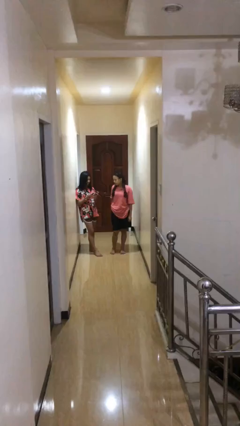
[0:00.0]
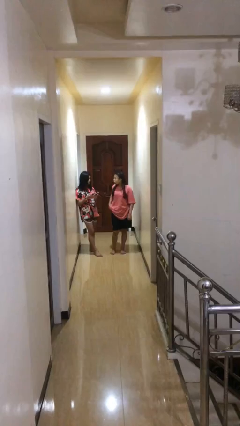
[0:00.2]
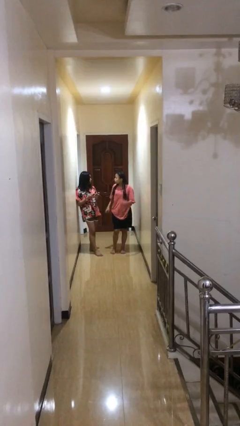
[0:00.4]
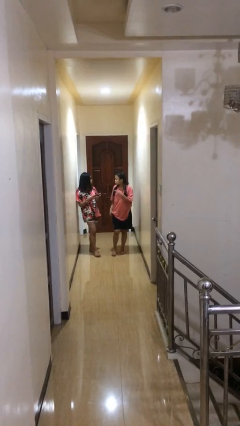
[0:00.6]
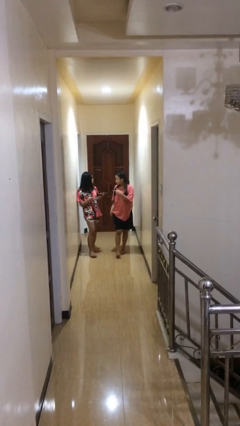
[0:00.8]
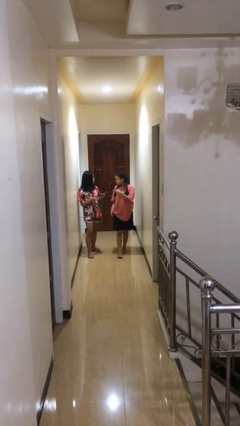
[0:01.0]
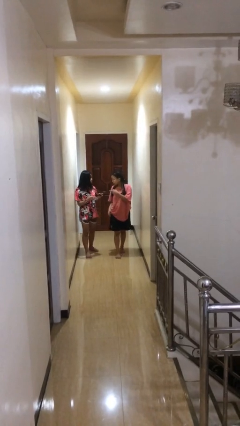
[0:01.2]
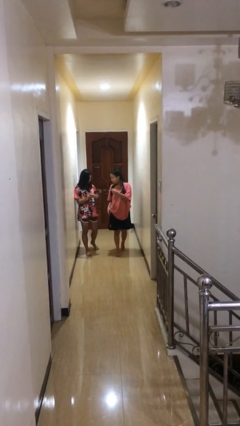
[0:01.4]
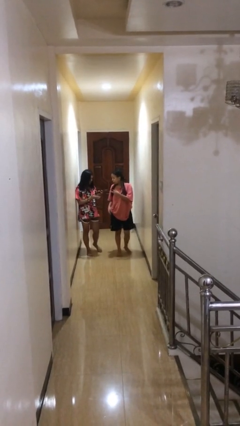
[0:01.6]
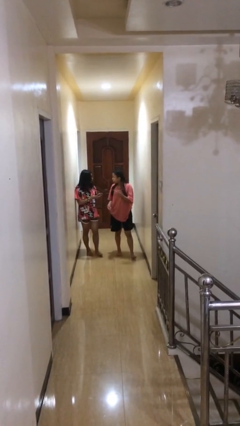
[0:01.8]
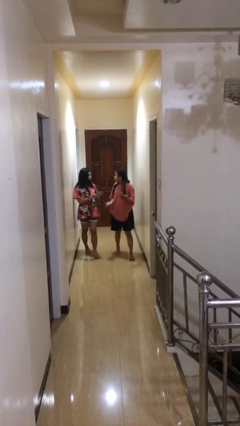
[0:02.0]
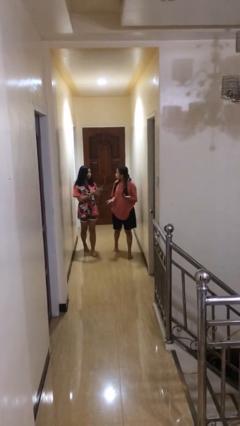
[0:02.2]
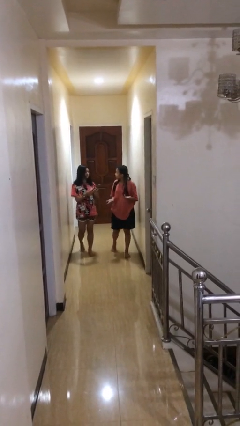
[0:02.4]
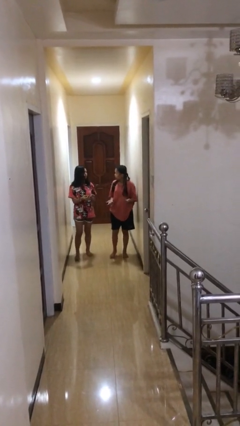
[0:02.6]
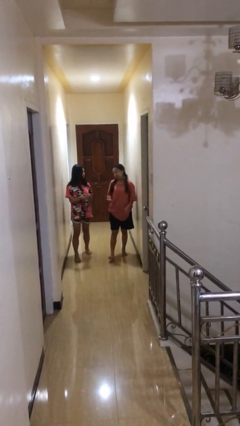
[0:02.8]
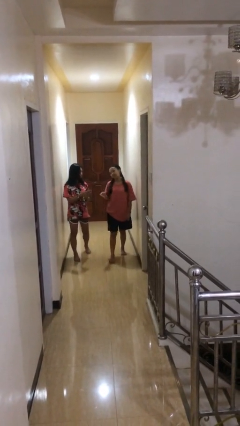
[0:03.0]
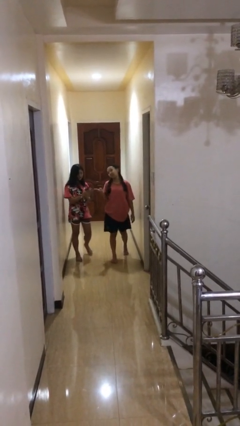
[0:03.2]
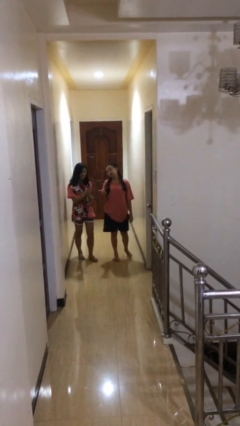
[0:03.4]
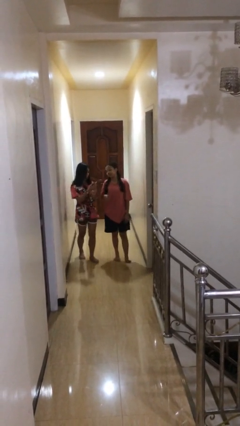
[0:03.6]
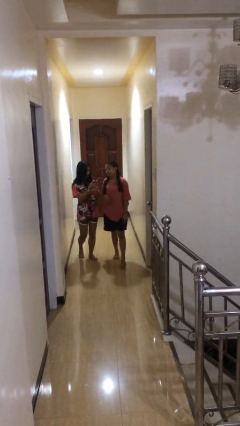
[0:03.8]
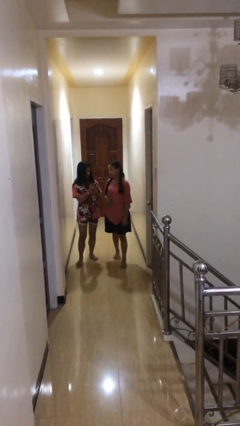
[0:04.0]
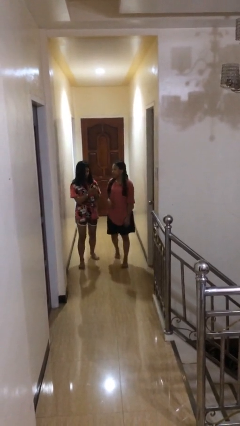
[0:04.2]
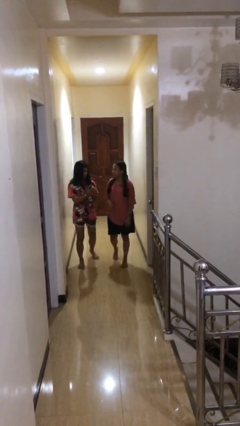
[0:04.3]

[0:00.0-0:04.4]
person talks to person

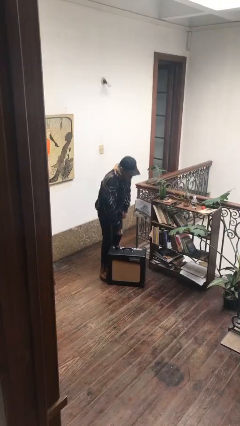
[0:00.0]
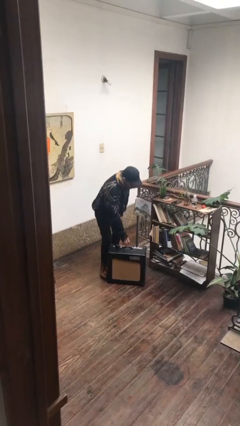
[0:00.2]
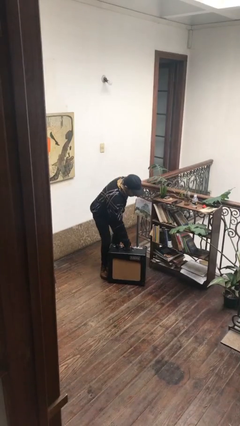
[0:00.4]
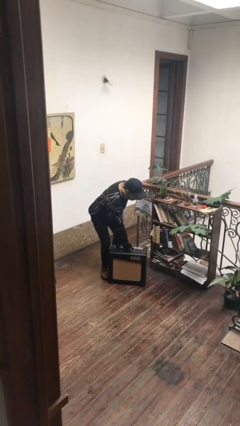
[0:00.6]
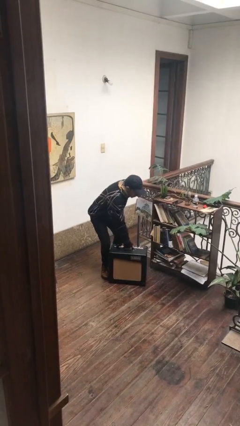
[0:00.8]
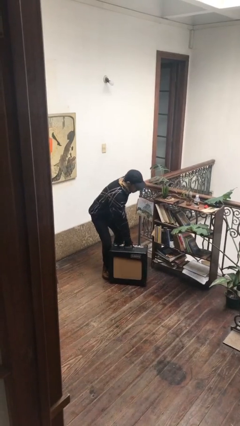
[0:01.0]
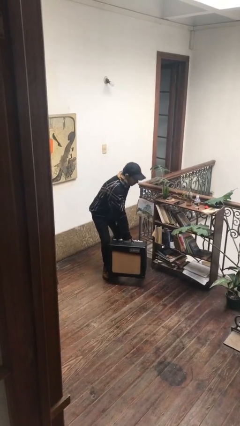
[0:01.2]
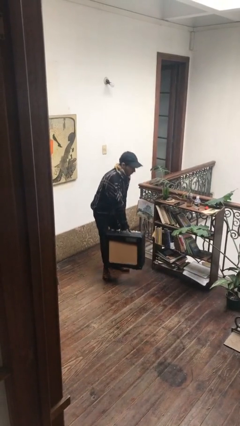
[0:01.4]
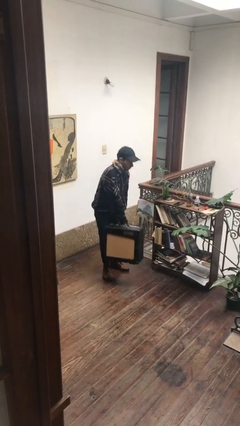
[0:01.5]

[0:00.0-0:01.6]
person picks up object from floor

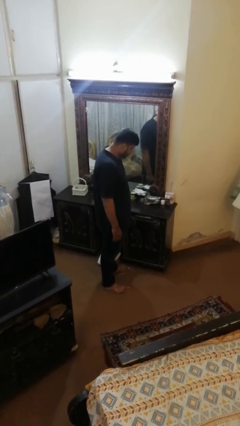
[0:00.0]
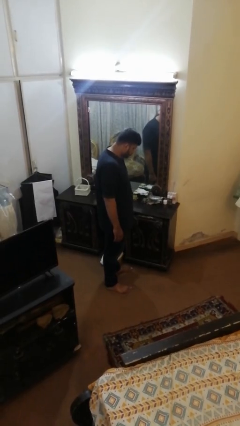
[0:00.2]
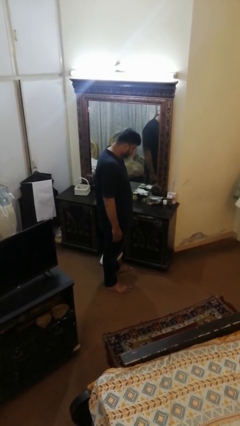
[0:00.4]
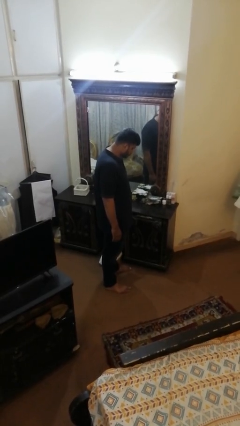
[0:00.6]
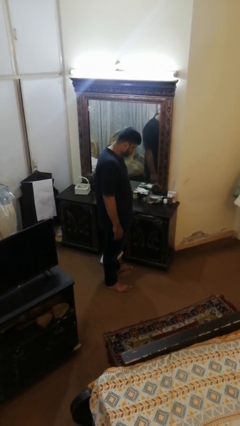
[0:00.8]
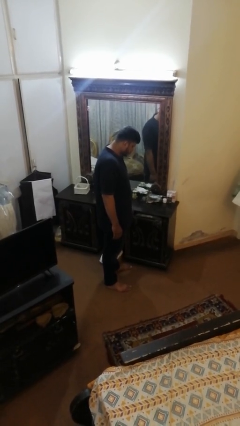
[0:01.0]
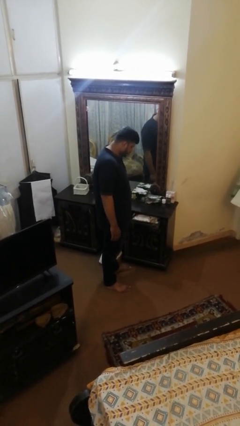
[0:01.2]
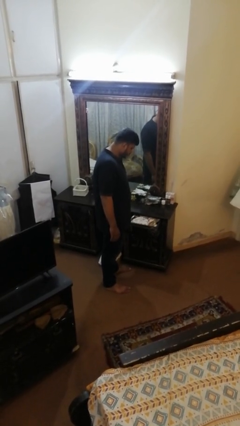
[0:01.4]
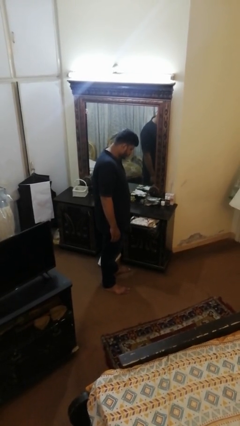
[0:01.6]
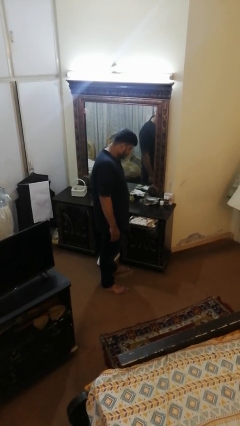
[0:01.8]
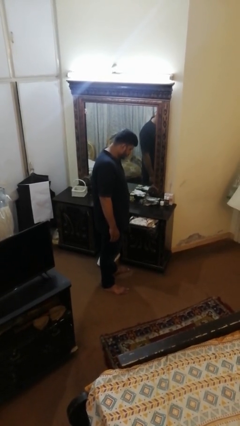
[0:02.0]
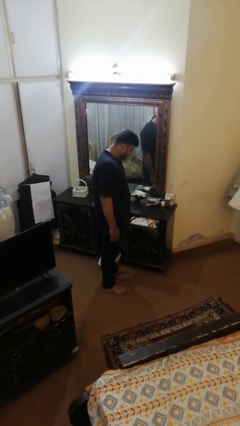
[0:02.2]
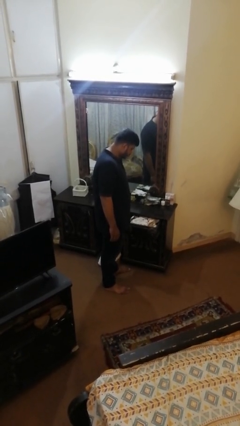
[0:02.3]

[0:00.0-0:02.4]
person opens dresser drawer

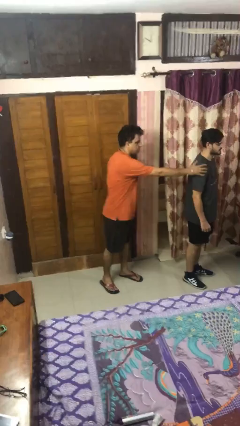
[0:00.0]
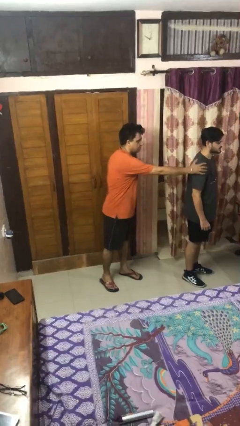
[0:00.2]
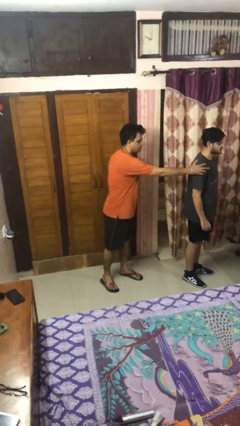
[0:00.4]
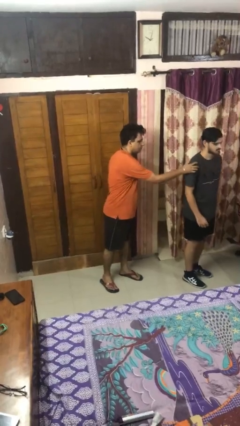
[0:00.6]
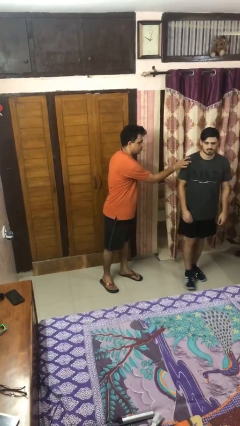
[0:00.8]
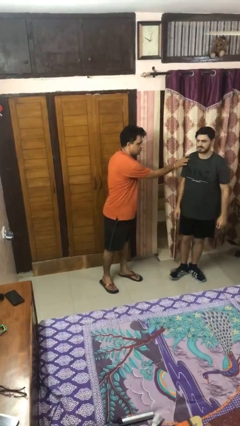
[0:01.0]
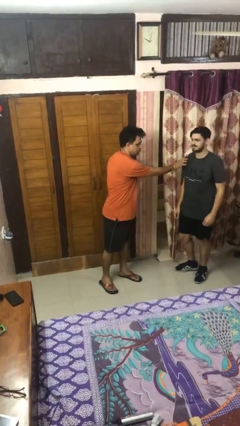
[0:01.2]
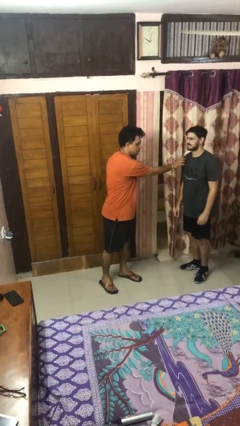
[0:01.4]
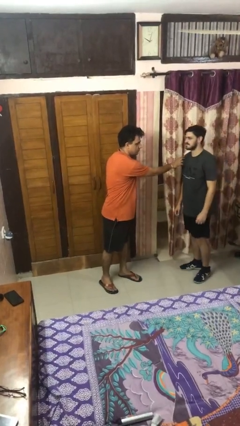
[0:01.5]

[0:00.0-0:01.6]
person spins person around

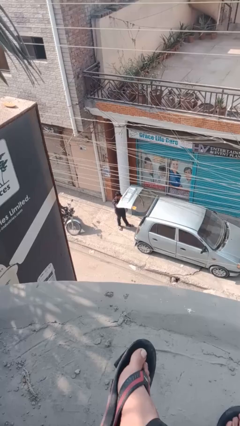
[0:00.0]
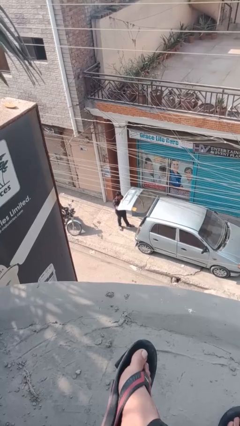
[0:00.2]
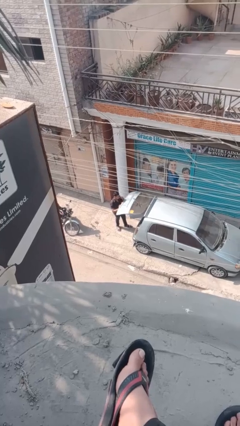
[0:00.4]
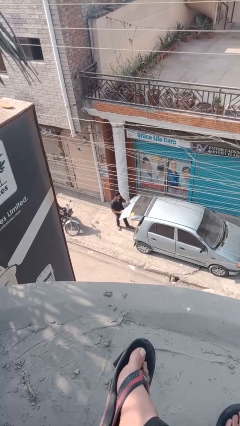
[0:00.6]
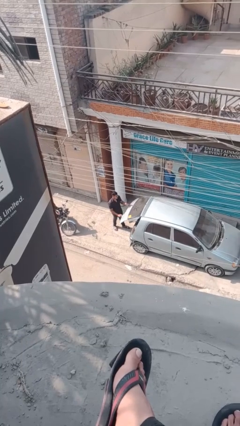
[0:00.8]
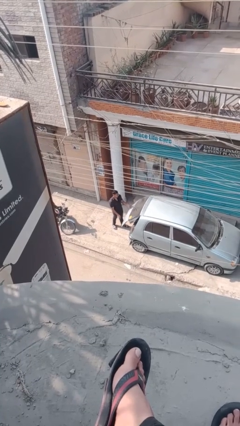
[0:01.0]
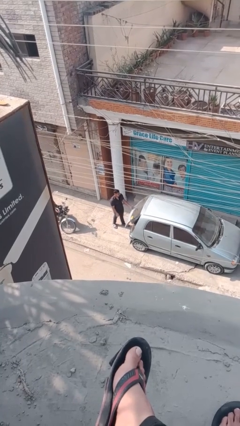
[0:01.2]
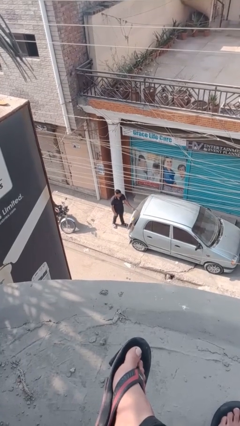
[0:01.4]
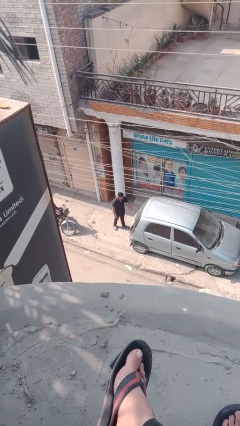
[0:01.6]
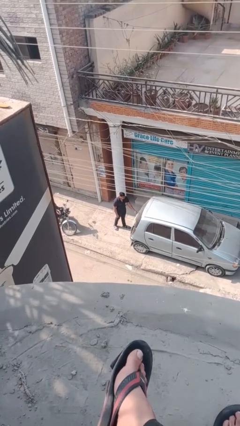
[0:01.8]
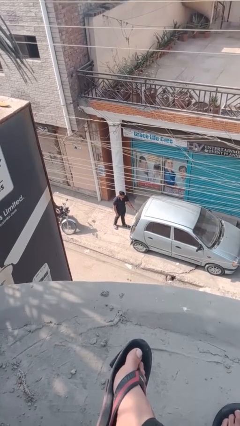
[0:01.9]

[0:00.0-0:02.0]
person closes car trunk

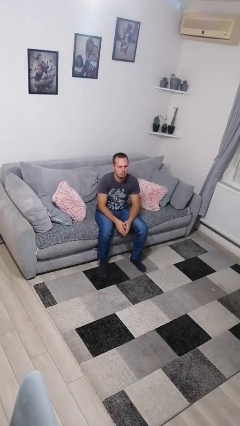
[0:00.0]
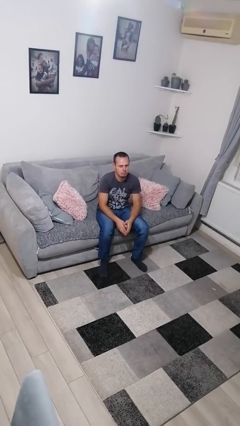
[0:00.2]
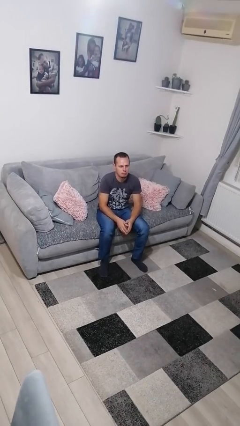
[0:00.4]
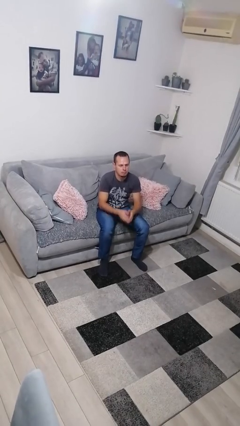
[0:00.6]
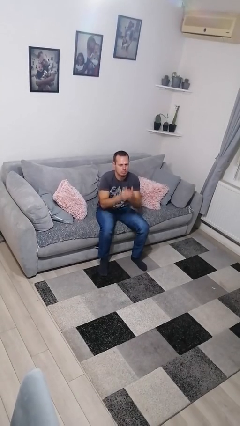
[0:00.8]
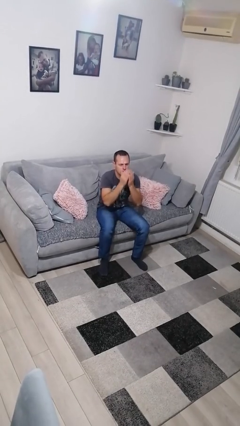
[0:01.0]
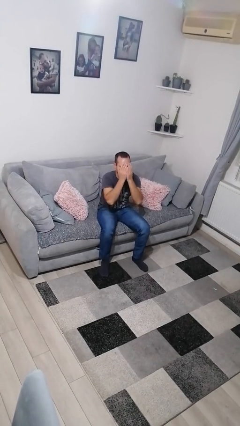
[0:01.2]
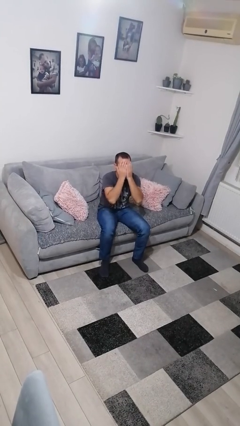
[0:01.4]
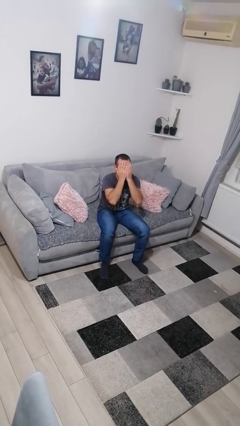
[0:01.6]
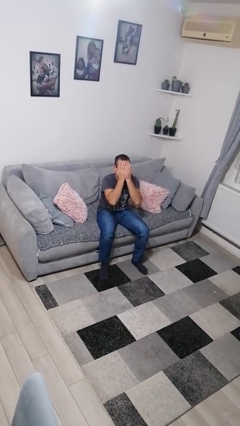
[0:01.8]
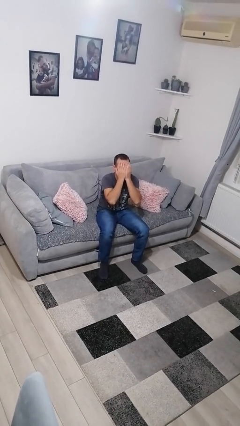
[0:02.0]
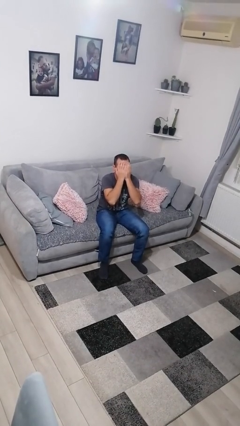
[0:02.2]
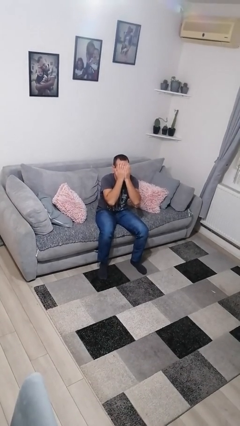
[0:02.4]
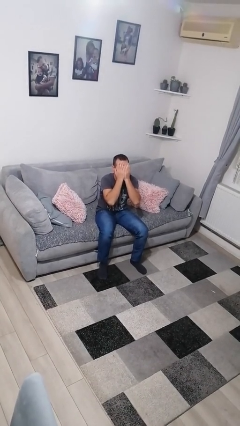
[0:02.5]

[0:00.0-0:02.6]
person covers face with hands

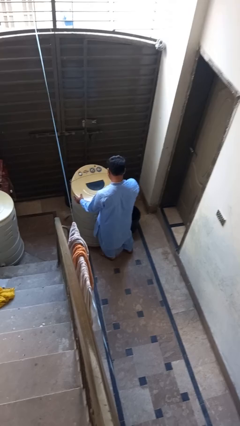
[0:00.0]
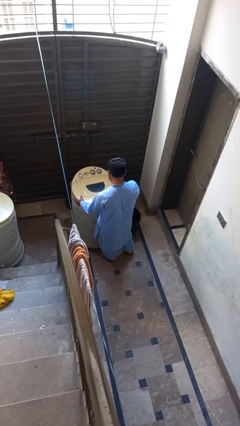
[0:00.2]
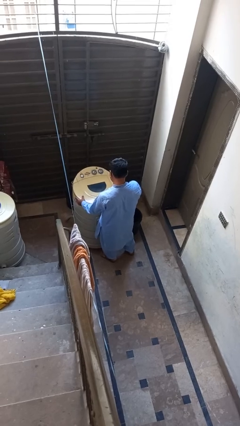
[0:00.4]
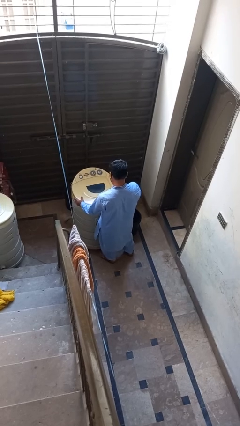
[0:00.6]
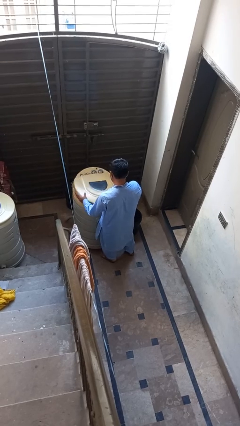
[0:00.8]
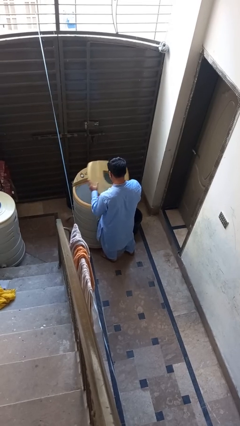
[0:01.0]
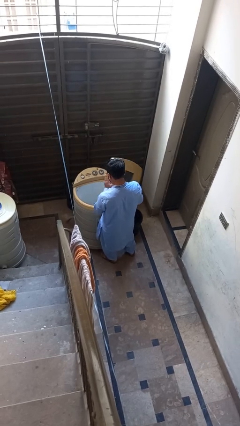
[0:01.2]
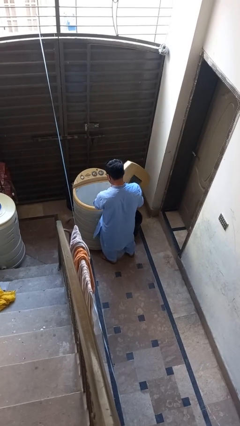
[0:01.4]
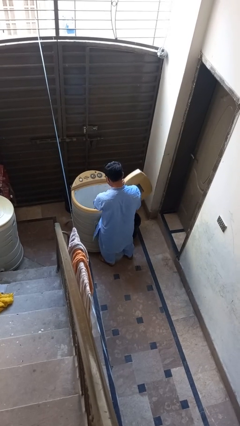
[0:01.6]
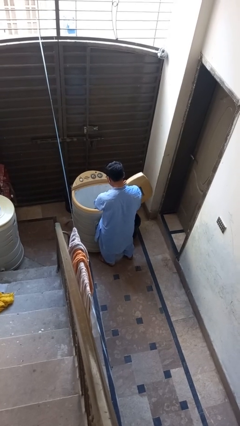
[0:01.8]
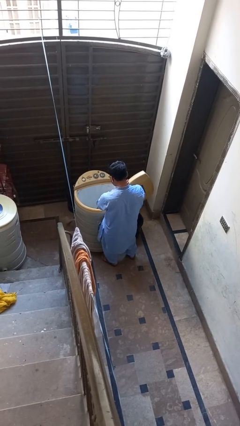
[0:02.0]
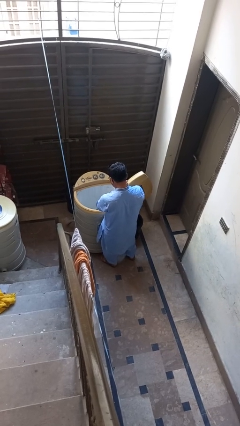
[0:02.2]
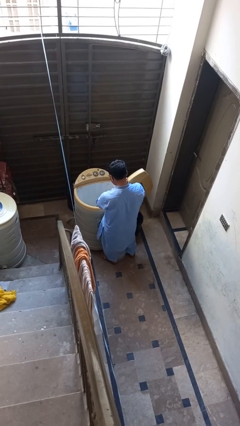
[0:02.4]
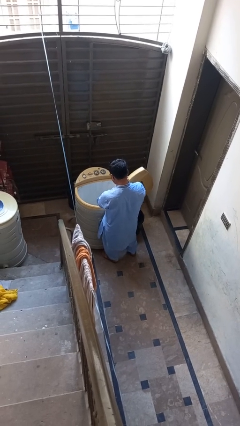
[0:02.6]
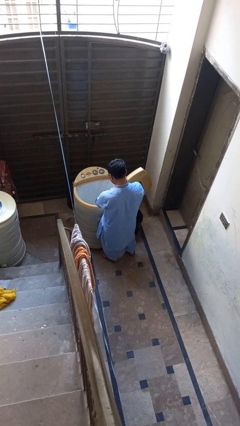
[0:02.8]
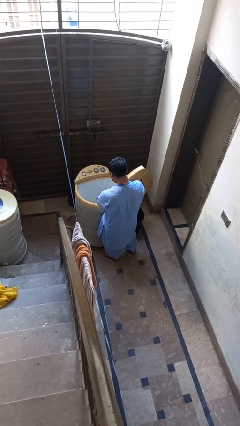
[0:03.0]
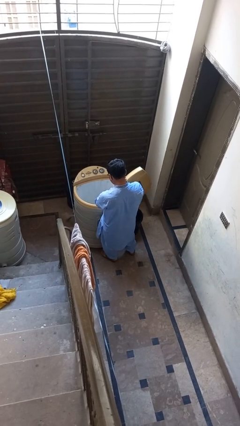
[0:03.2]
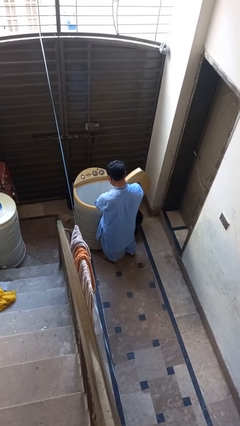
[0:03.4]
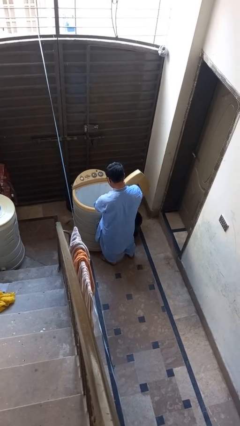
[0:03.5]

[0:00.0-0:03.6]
person opens clothes washer
